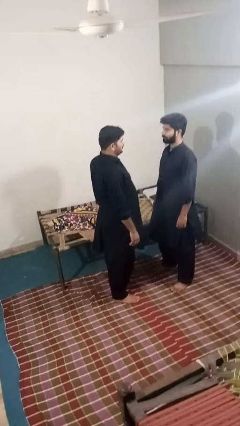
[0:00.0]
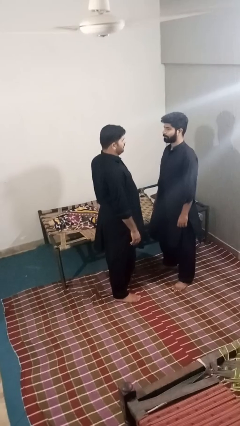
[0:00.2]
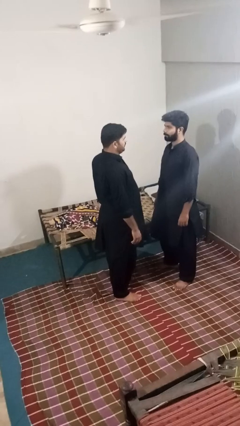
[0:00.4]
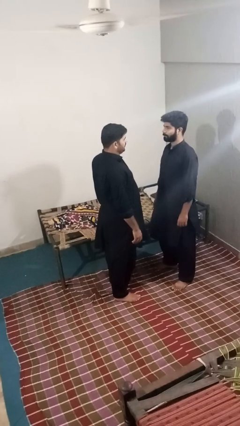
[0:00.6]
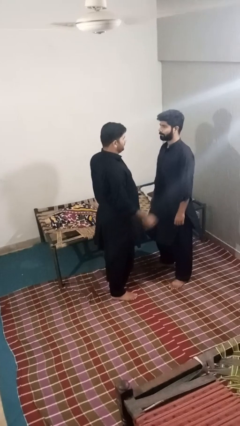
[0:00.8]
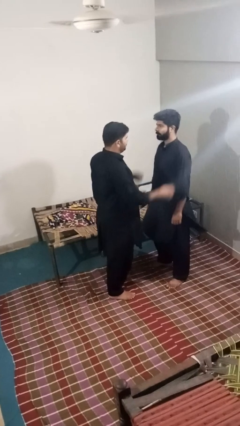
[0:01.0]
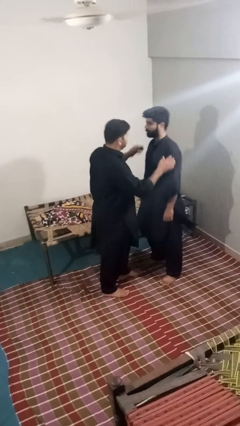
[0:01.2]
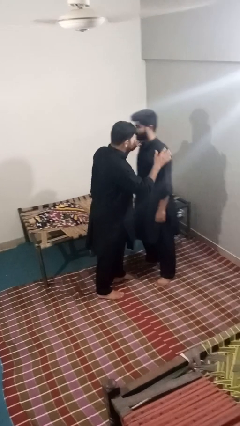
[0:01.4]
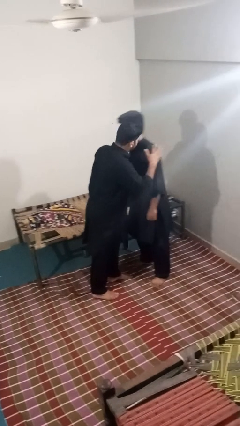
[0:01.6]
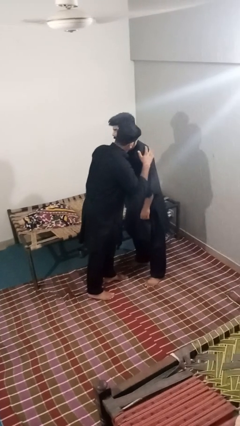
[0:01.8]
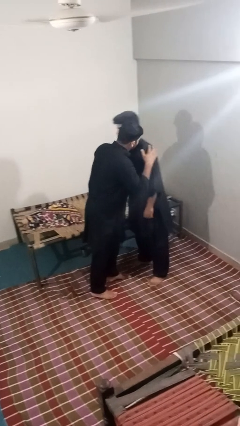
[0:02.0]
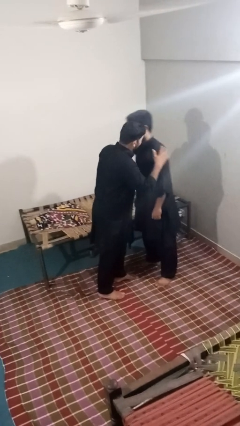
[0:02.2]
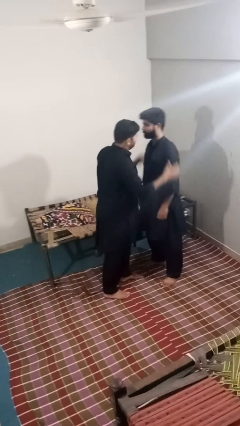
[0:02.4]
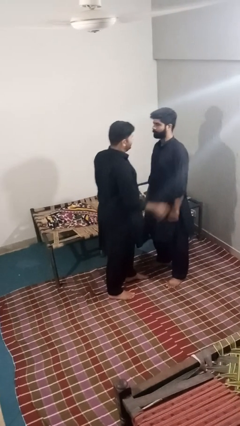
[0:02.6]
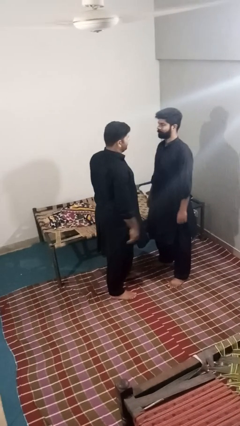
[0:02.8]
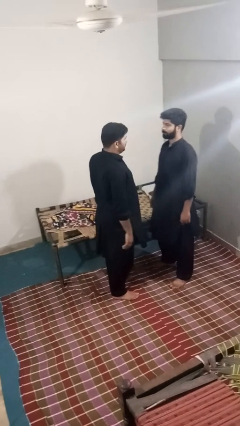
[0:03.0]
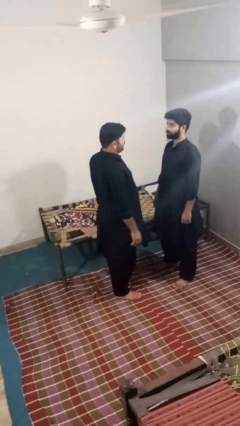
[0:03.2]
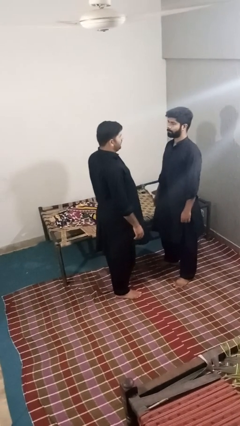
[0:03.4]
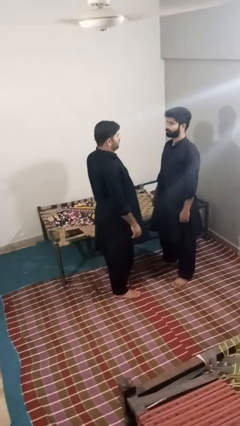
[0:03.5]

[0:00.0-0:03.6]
person kisses cheek of person

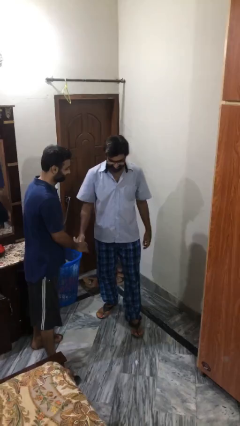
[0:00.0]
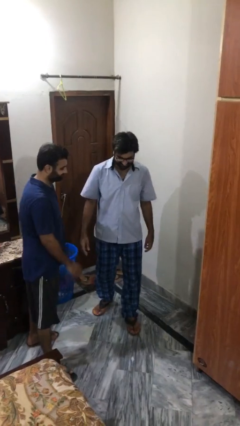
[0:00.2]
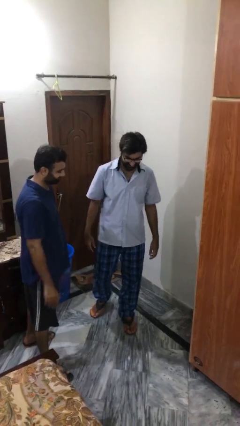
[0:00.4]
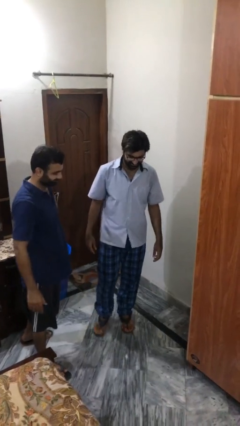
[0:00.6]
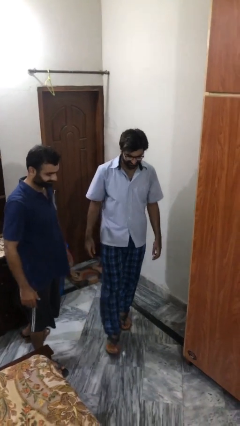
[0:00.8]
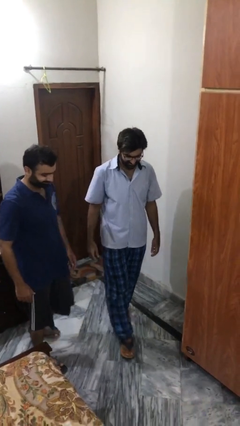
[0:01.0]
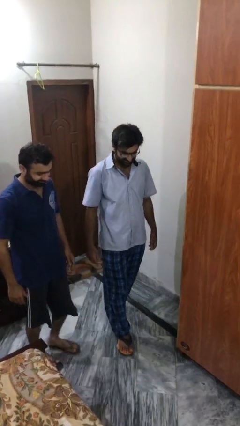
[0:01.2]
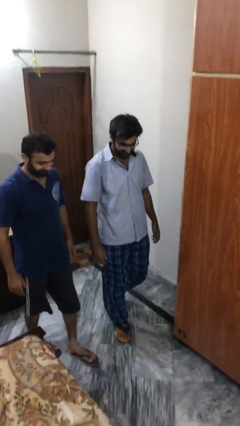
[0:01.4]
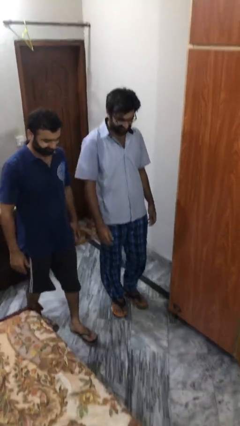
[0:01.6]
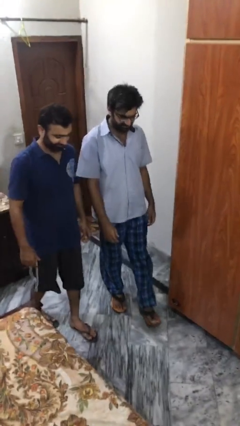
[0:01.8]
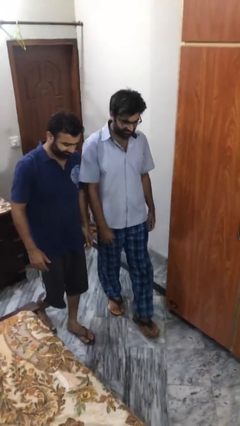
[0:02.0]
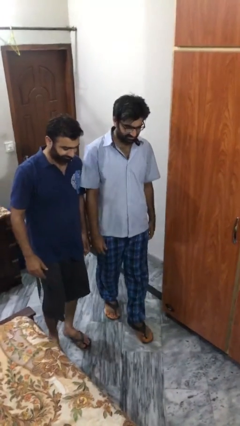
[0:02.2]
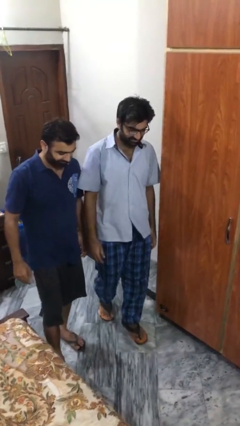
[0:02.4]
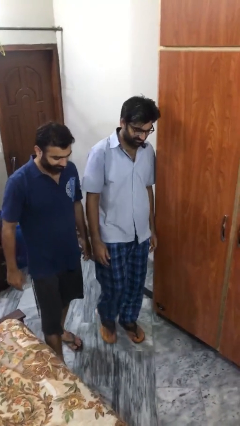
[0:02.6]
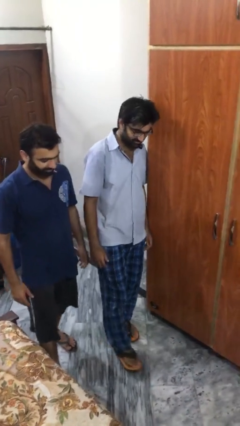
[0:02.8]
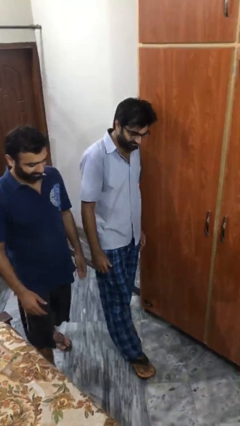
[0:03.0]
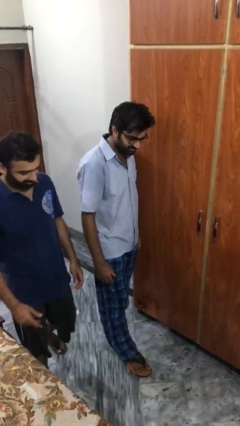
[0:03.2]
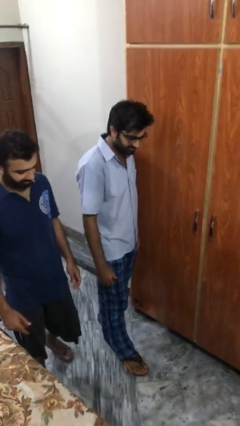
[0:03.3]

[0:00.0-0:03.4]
person talks to person

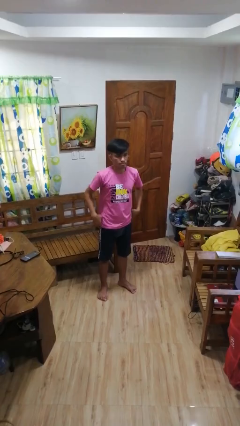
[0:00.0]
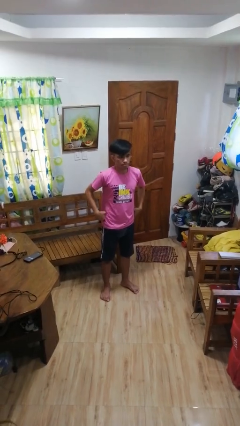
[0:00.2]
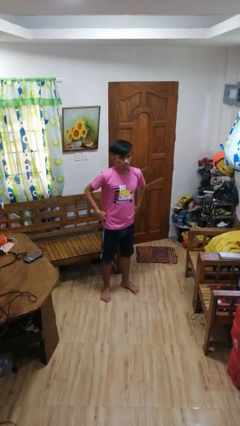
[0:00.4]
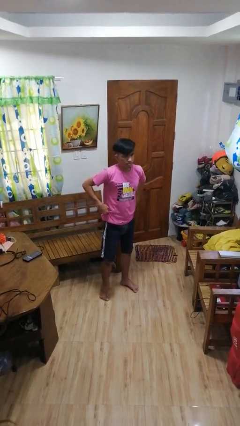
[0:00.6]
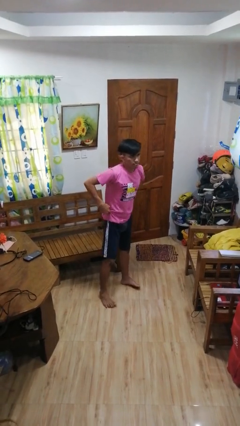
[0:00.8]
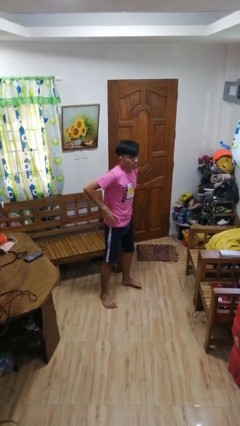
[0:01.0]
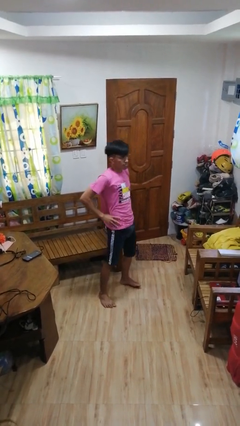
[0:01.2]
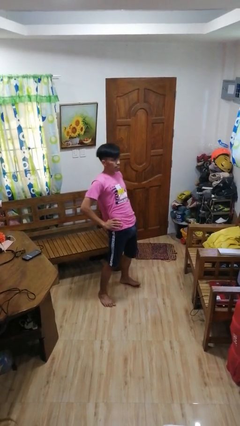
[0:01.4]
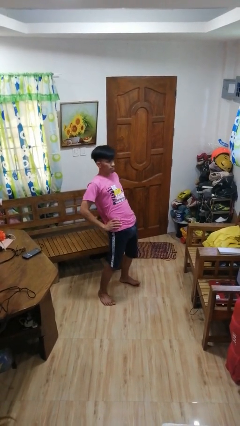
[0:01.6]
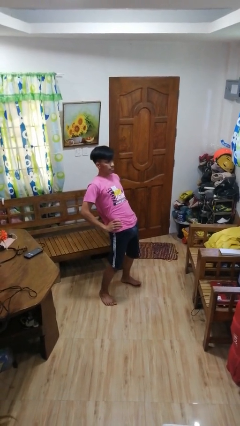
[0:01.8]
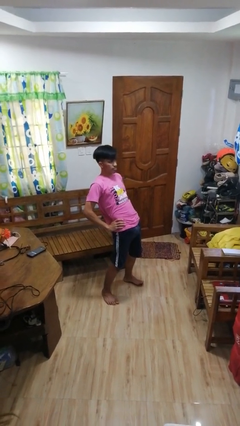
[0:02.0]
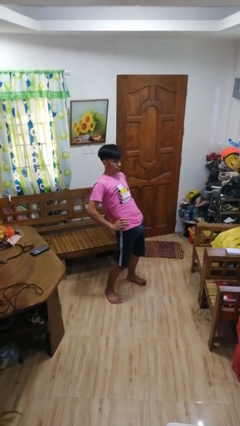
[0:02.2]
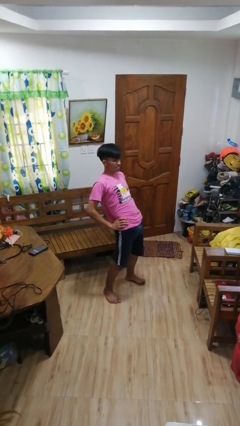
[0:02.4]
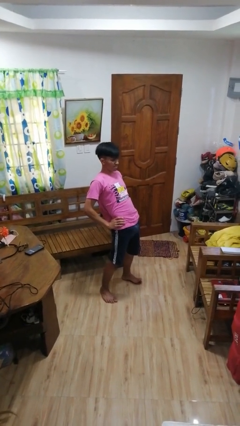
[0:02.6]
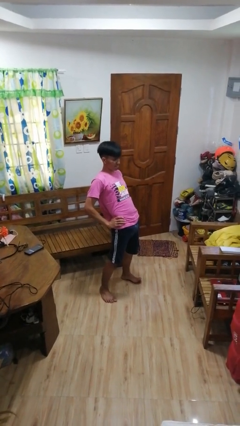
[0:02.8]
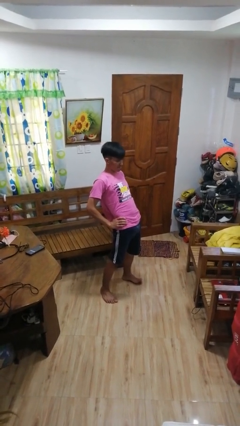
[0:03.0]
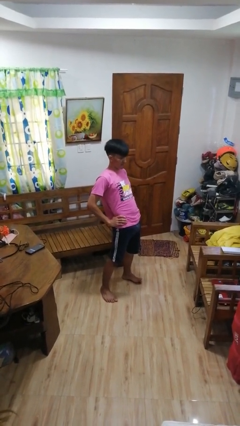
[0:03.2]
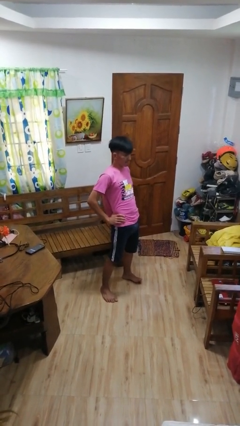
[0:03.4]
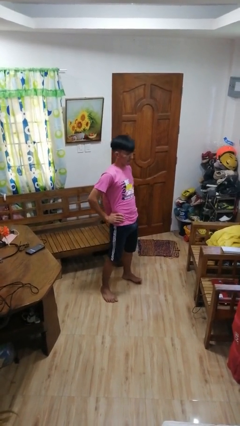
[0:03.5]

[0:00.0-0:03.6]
person stretches back

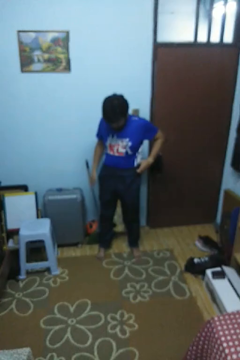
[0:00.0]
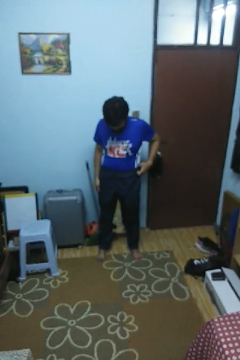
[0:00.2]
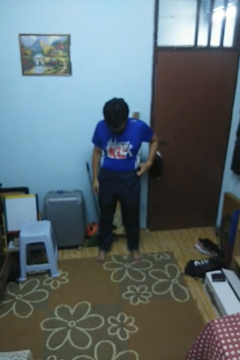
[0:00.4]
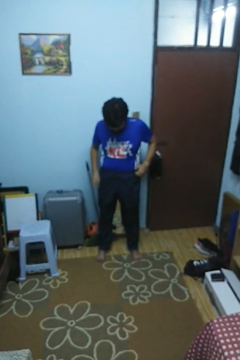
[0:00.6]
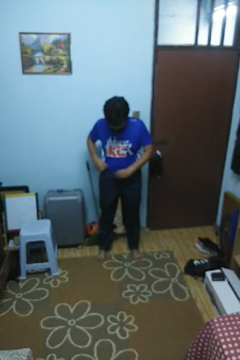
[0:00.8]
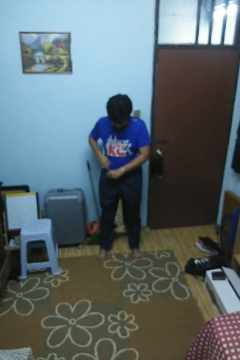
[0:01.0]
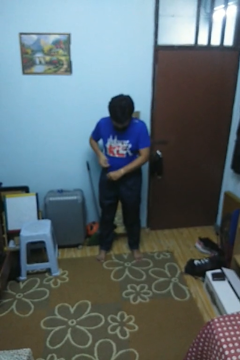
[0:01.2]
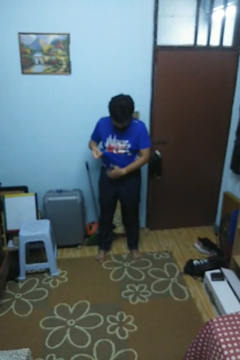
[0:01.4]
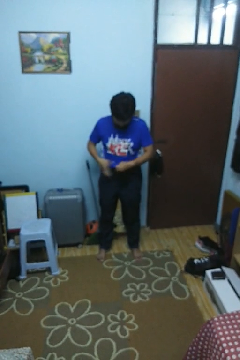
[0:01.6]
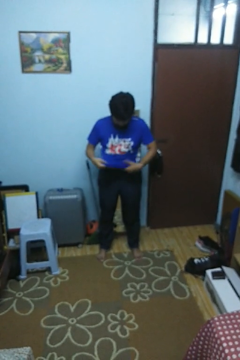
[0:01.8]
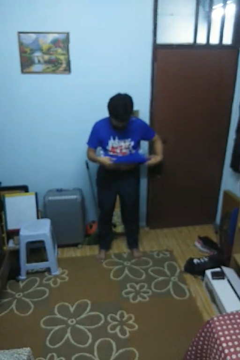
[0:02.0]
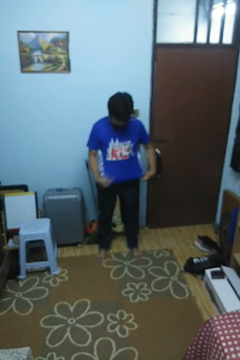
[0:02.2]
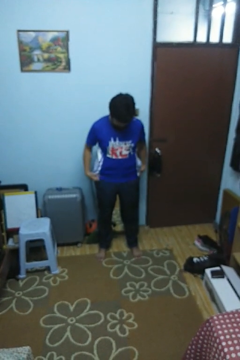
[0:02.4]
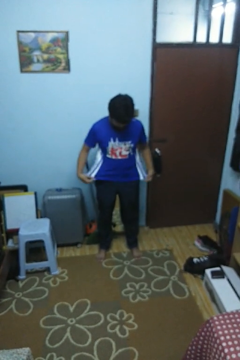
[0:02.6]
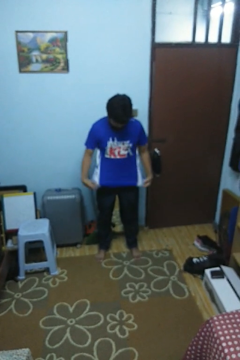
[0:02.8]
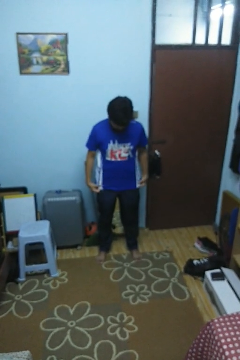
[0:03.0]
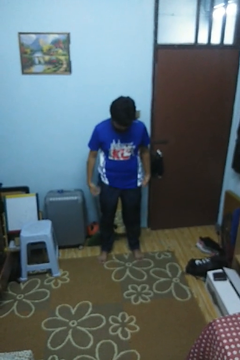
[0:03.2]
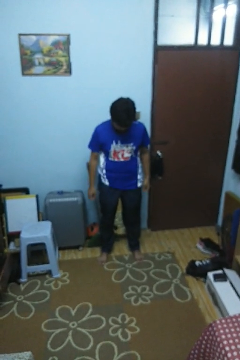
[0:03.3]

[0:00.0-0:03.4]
person untucks shirt

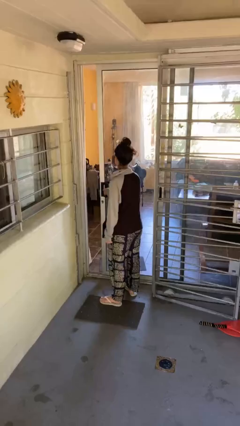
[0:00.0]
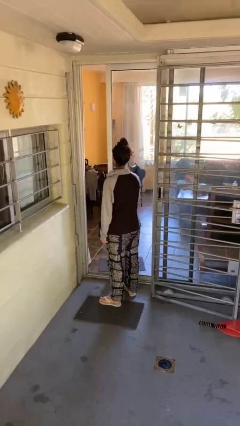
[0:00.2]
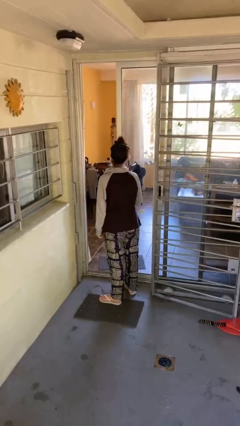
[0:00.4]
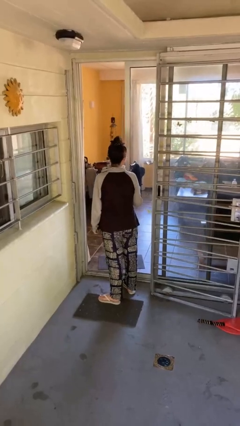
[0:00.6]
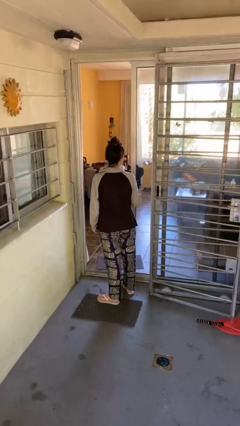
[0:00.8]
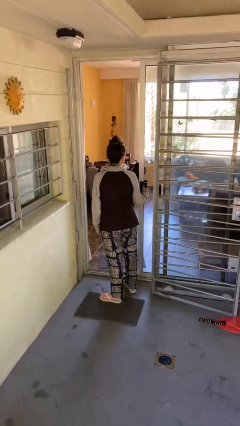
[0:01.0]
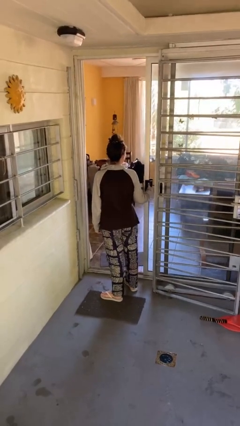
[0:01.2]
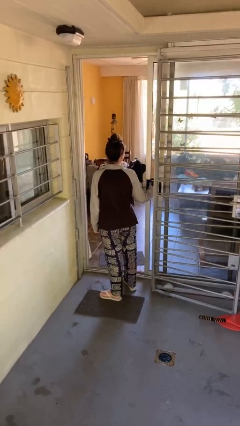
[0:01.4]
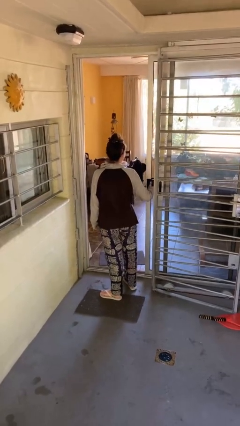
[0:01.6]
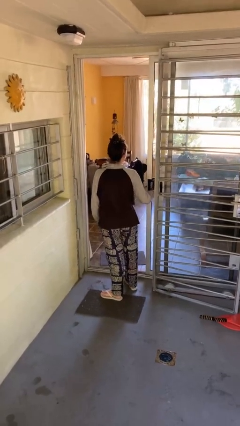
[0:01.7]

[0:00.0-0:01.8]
person opens facility door

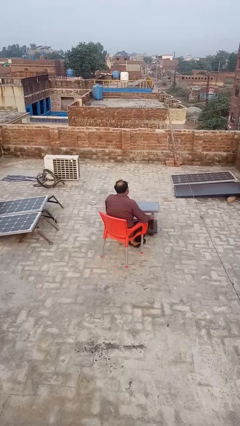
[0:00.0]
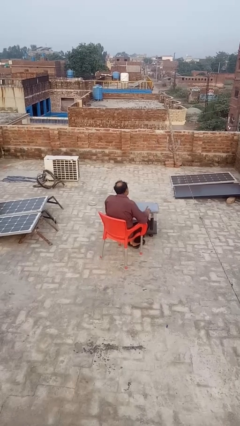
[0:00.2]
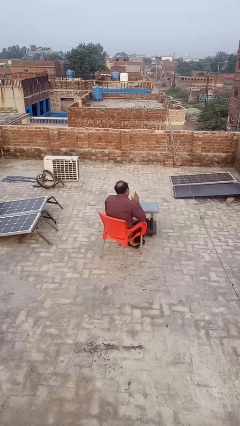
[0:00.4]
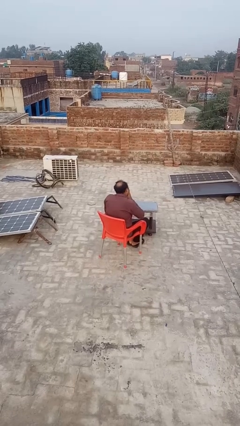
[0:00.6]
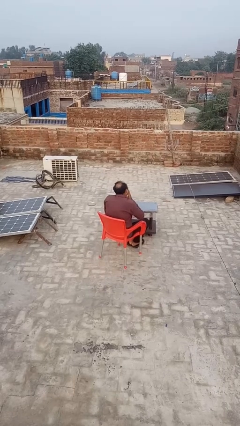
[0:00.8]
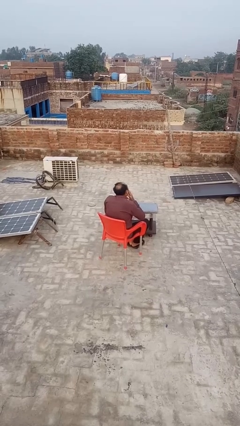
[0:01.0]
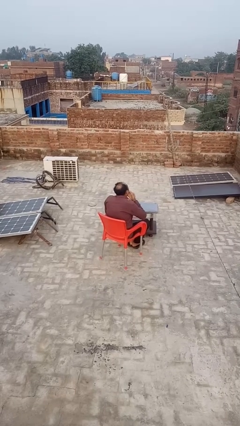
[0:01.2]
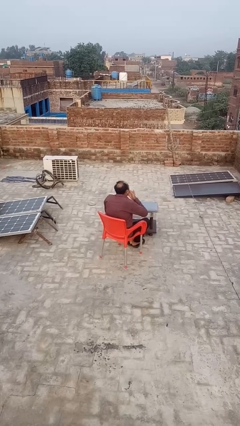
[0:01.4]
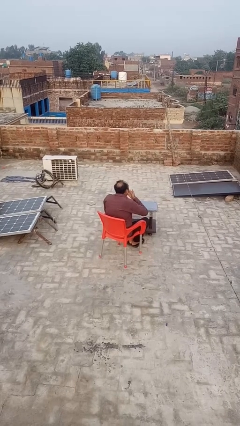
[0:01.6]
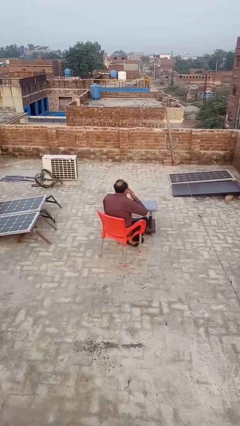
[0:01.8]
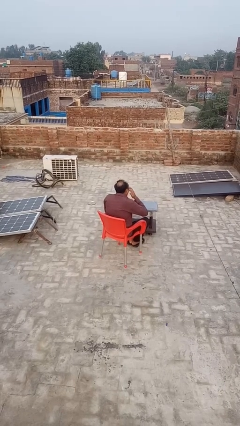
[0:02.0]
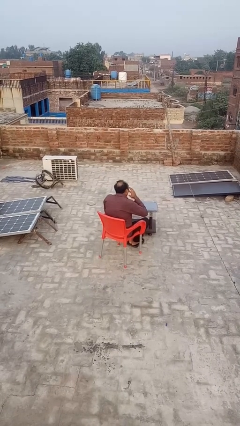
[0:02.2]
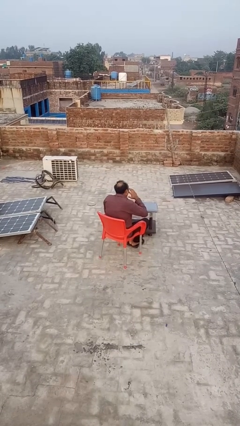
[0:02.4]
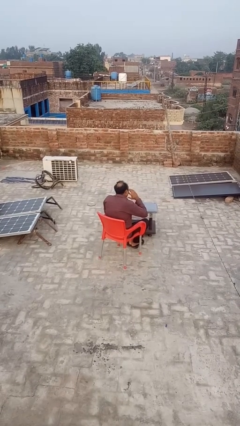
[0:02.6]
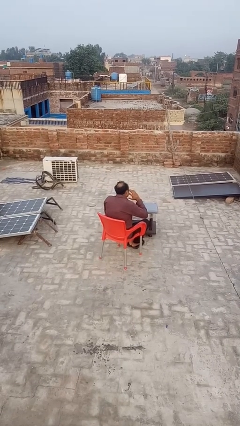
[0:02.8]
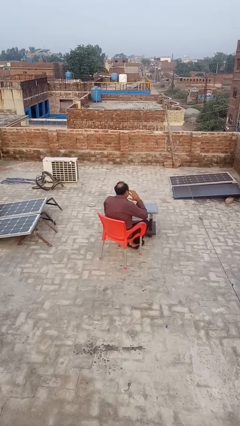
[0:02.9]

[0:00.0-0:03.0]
person licks fingers
